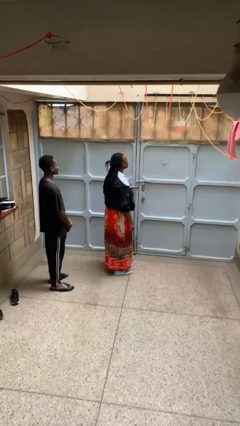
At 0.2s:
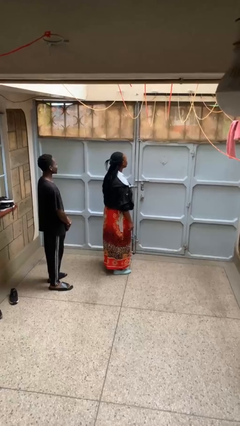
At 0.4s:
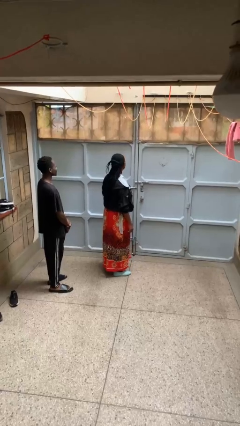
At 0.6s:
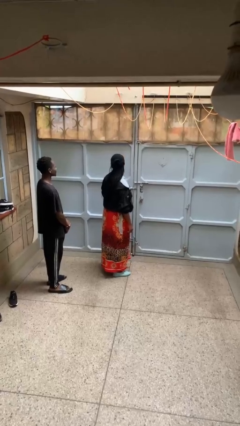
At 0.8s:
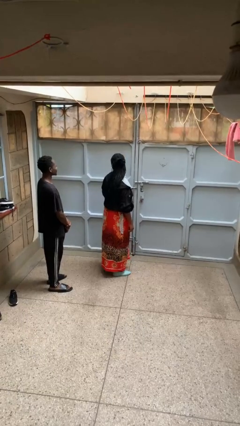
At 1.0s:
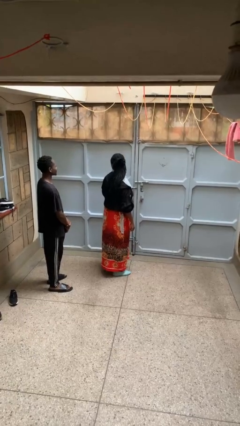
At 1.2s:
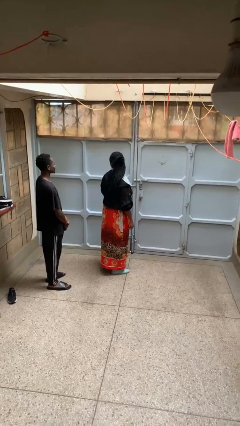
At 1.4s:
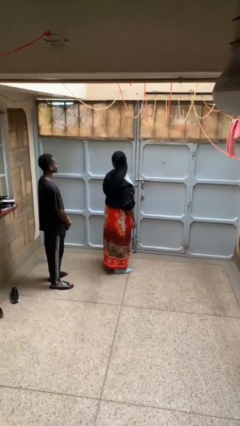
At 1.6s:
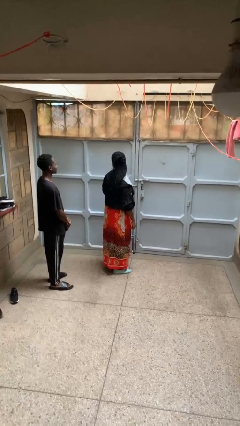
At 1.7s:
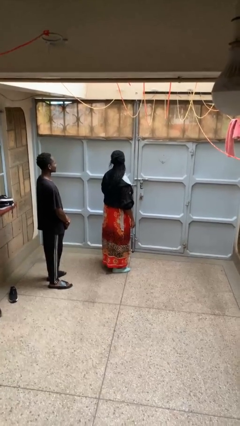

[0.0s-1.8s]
person looks over shoulder

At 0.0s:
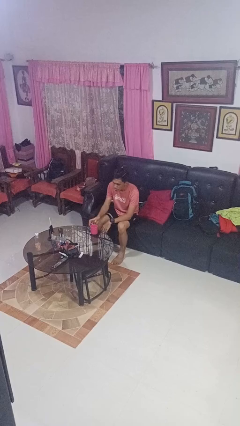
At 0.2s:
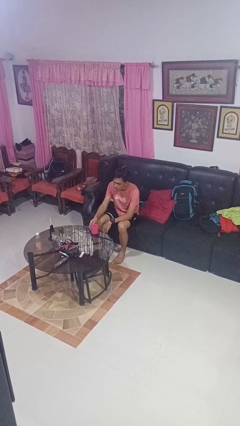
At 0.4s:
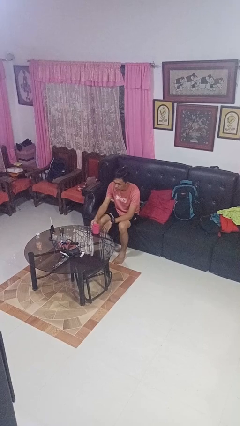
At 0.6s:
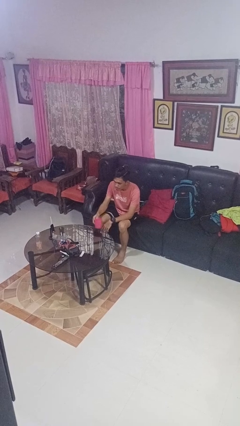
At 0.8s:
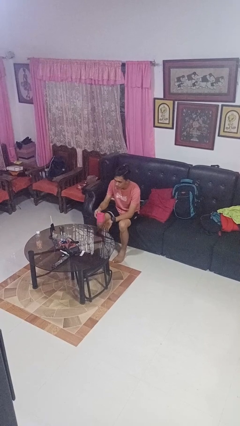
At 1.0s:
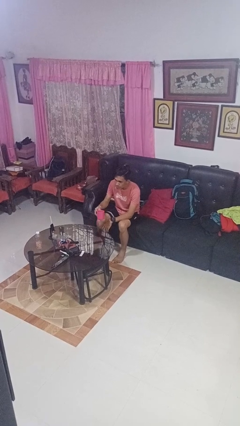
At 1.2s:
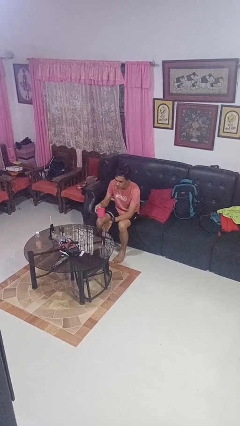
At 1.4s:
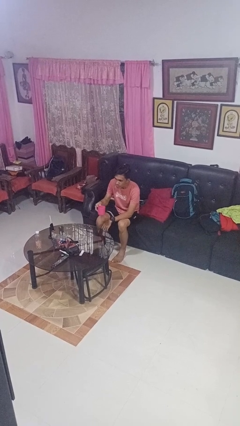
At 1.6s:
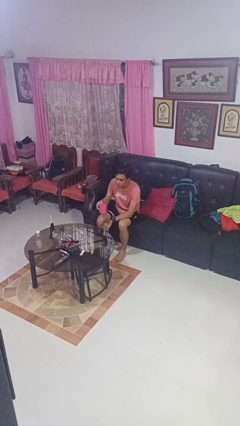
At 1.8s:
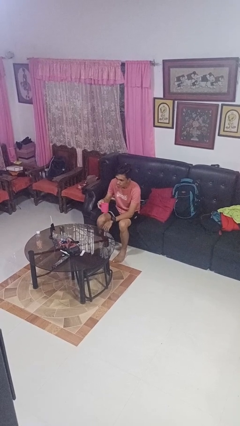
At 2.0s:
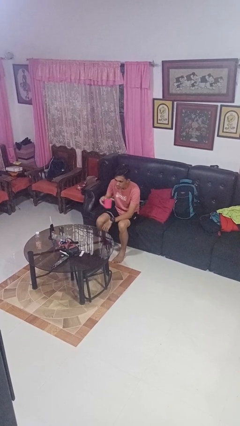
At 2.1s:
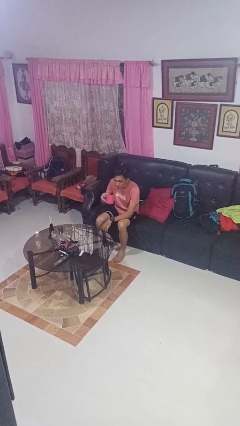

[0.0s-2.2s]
person picks up object from table

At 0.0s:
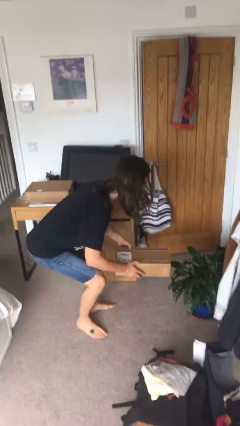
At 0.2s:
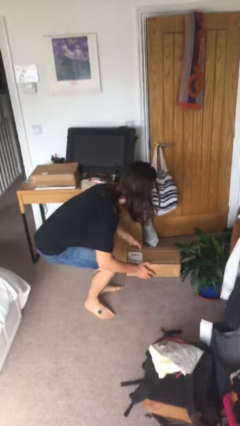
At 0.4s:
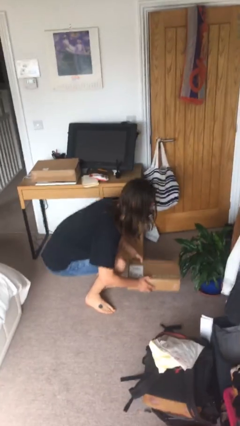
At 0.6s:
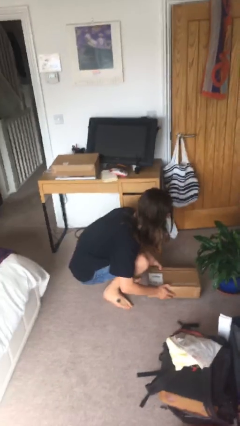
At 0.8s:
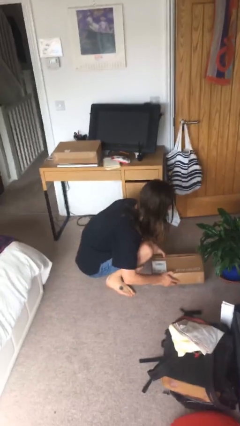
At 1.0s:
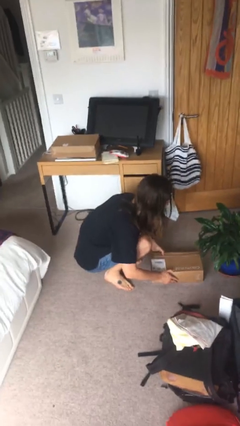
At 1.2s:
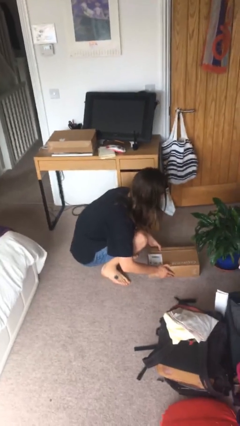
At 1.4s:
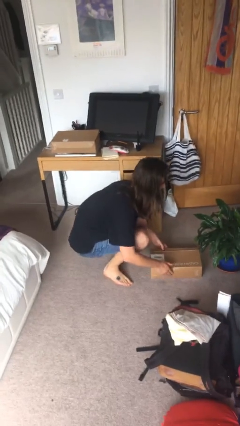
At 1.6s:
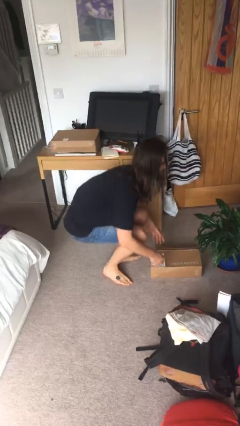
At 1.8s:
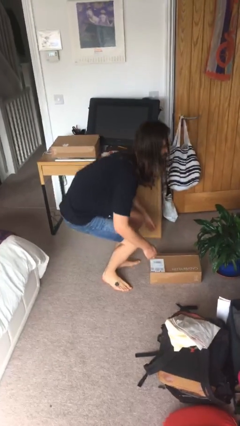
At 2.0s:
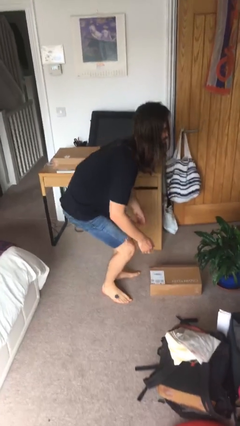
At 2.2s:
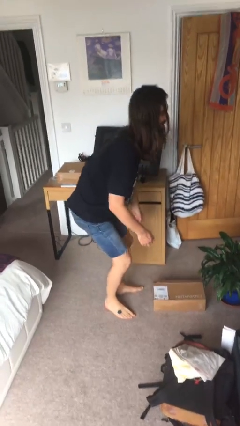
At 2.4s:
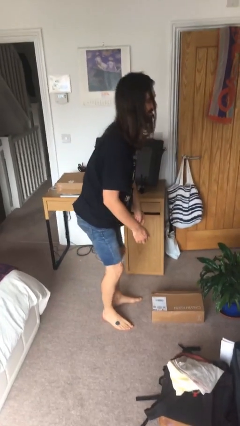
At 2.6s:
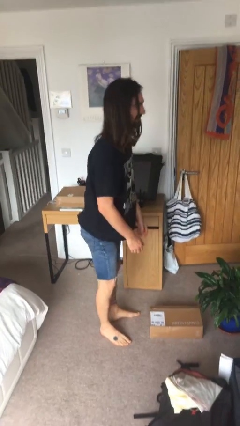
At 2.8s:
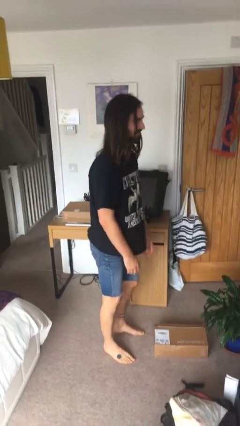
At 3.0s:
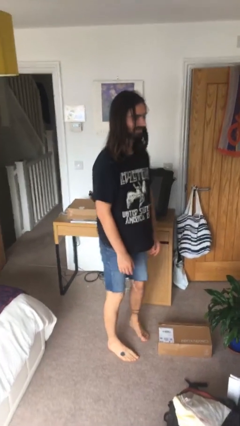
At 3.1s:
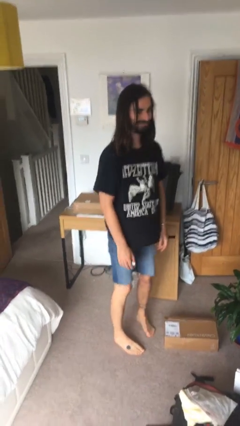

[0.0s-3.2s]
person puts down object on floor

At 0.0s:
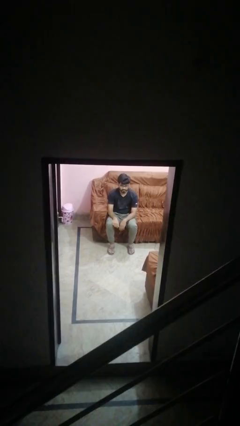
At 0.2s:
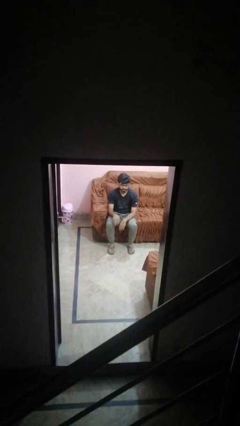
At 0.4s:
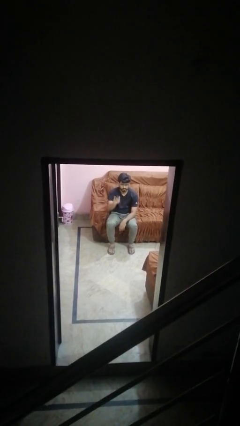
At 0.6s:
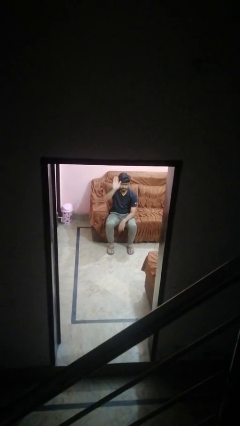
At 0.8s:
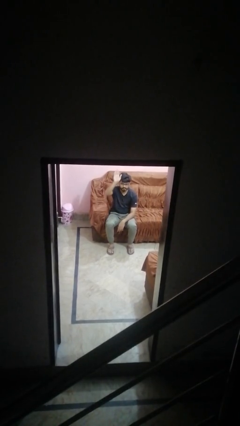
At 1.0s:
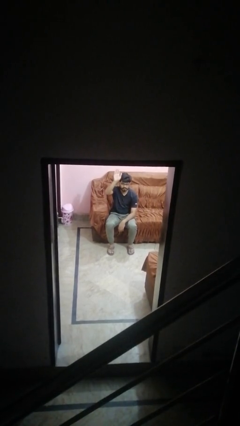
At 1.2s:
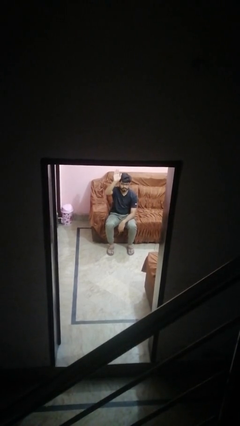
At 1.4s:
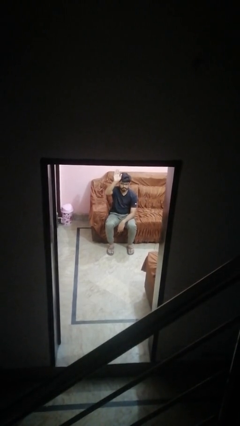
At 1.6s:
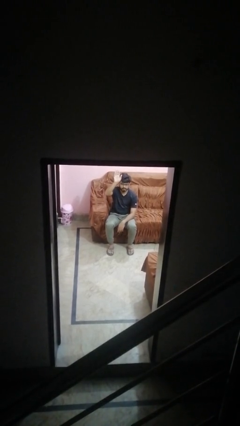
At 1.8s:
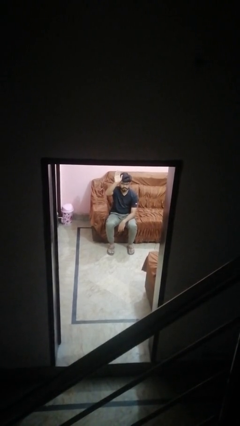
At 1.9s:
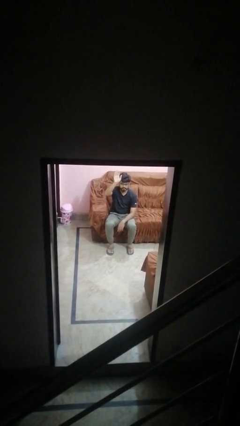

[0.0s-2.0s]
person gestures raise hand

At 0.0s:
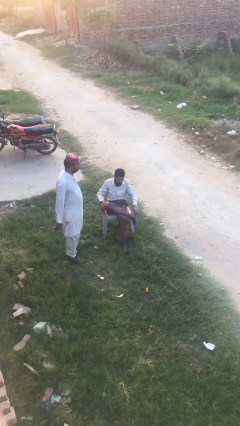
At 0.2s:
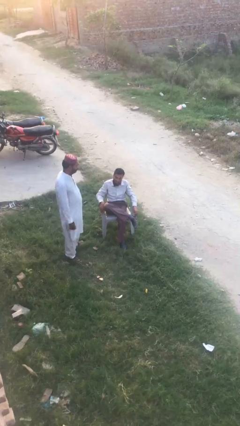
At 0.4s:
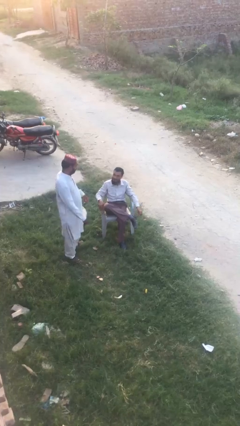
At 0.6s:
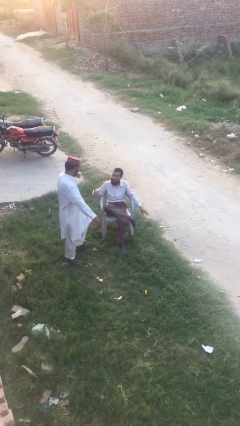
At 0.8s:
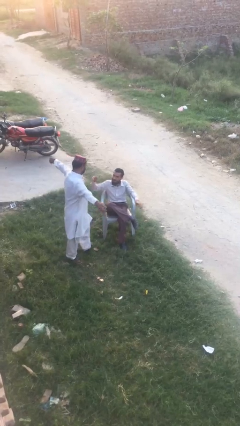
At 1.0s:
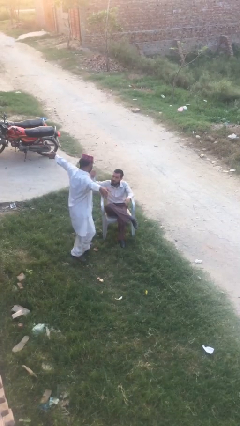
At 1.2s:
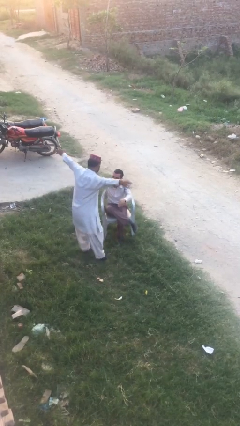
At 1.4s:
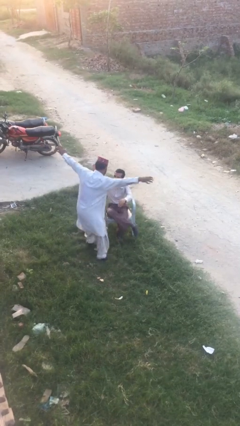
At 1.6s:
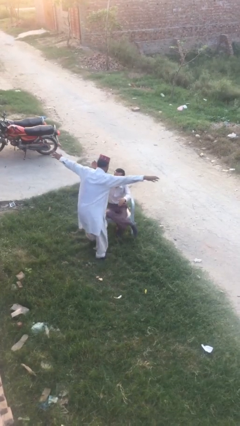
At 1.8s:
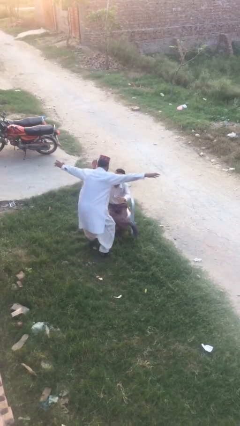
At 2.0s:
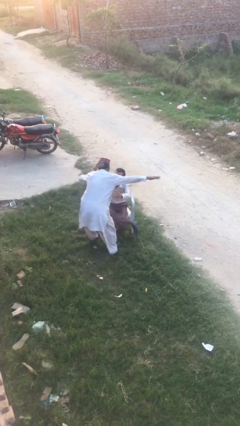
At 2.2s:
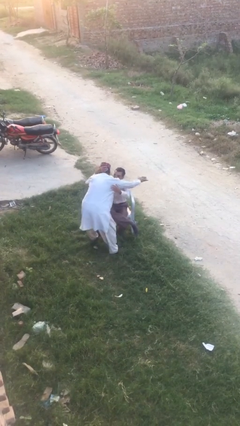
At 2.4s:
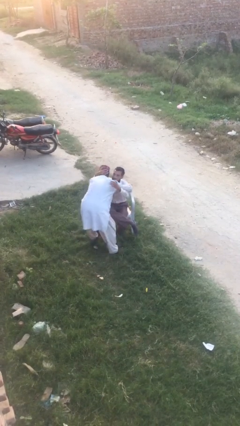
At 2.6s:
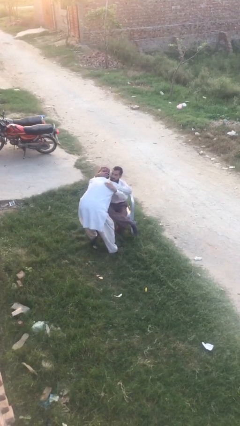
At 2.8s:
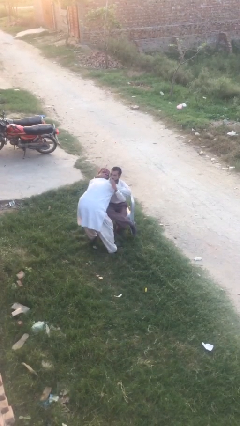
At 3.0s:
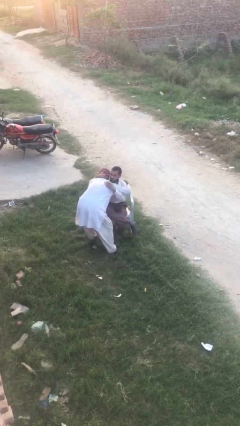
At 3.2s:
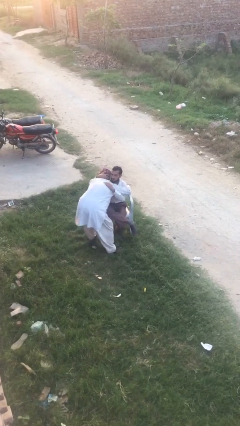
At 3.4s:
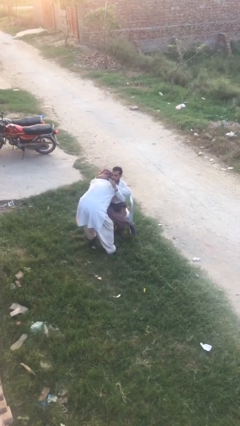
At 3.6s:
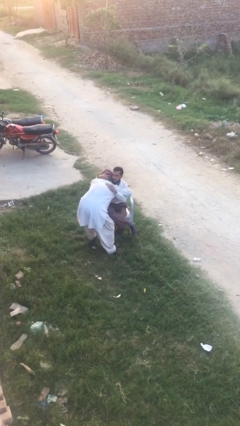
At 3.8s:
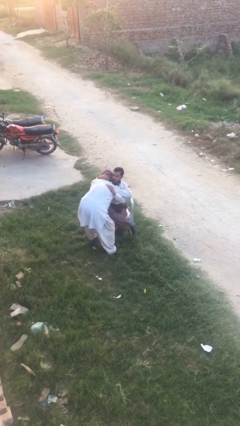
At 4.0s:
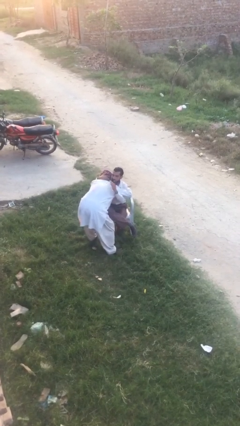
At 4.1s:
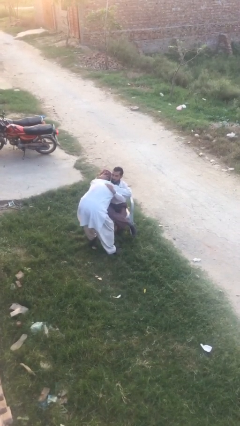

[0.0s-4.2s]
person embraces person

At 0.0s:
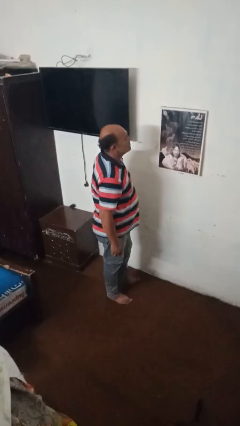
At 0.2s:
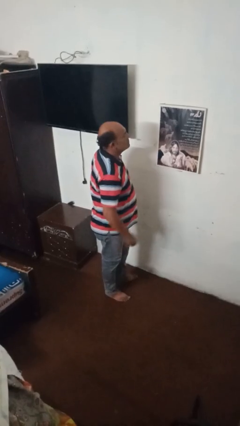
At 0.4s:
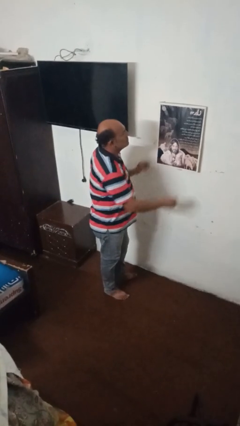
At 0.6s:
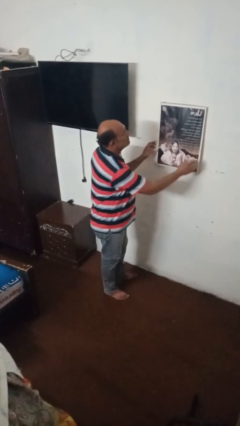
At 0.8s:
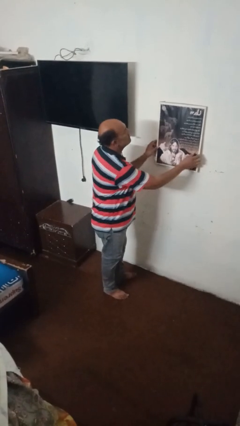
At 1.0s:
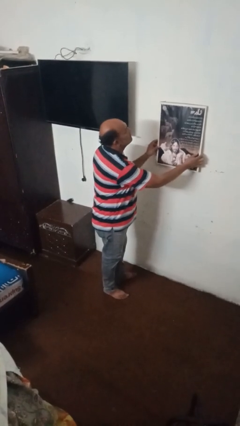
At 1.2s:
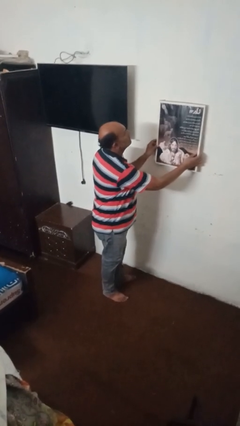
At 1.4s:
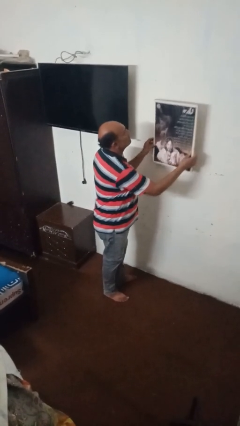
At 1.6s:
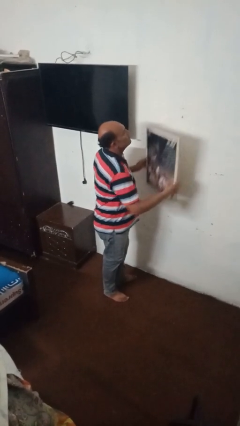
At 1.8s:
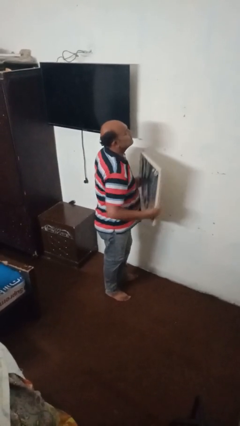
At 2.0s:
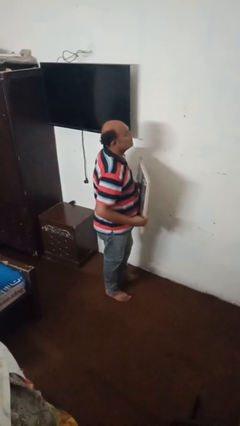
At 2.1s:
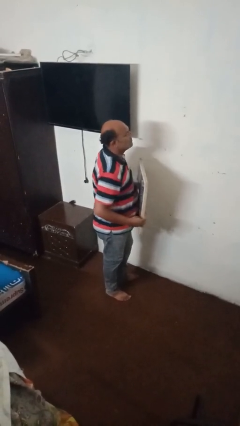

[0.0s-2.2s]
person takes down picture frame

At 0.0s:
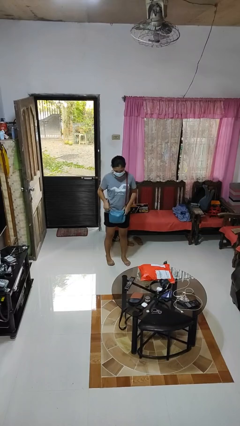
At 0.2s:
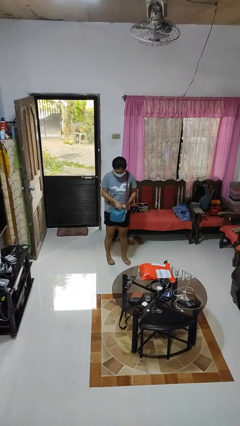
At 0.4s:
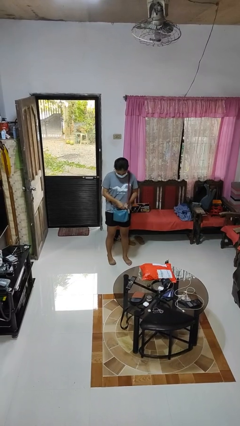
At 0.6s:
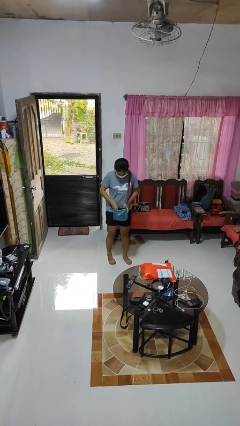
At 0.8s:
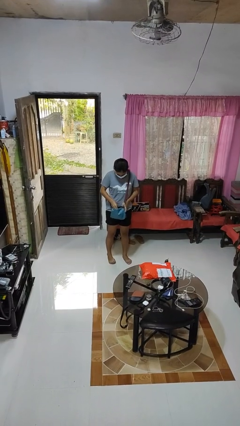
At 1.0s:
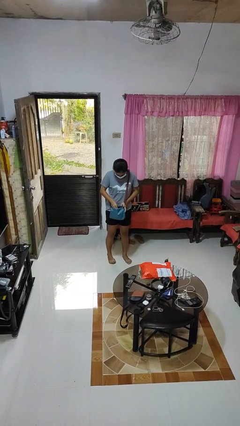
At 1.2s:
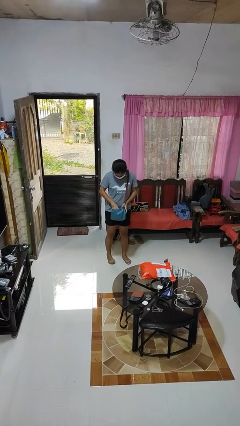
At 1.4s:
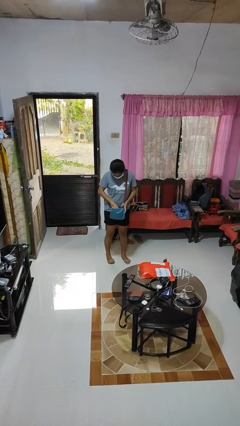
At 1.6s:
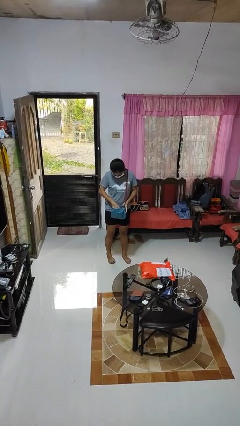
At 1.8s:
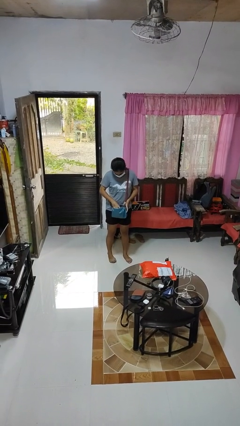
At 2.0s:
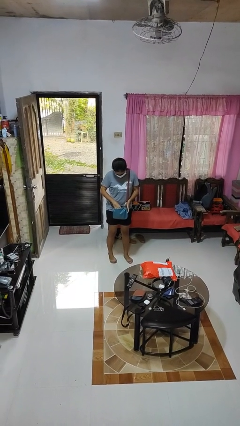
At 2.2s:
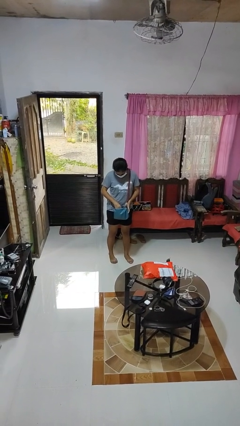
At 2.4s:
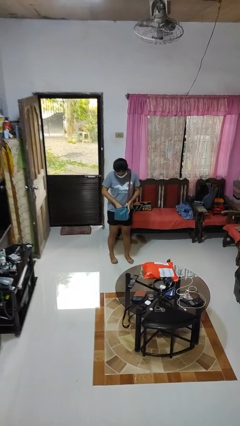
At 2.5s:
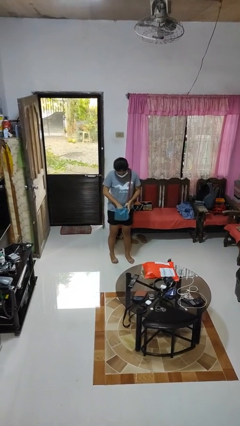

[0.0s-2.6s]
person searches in purse
